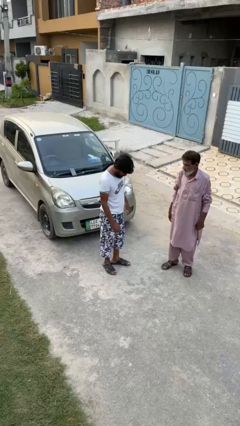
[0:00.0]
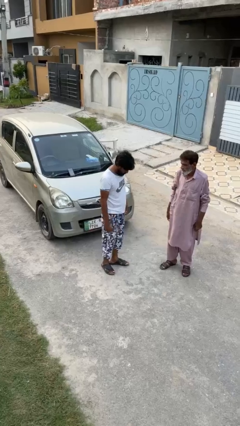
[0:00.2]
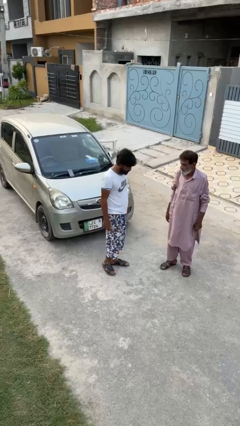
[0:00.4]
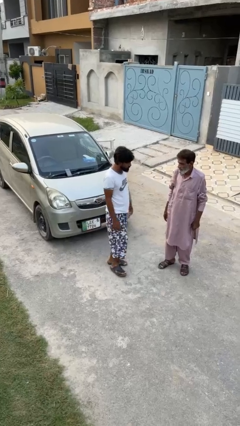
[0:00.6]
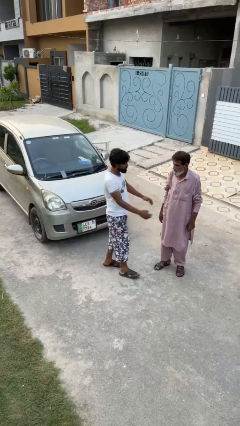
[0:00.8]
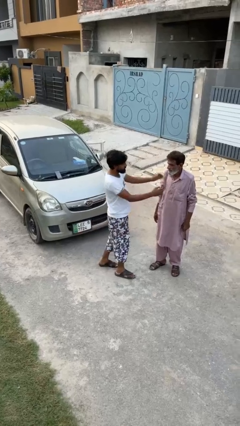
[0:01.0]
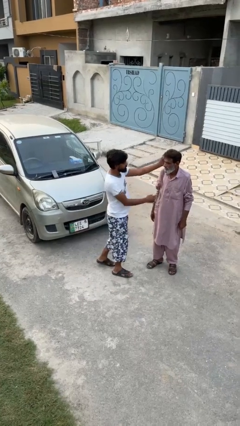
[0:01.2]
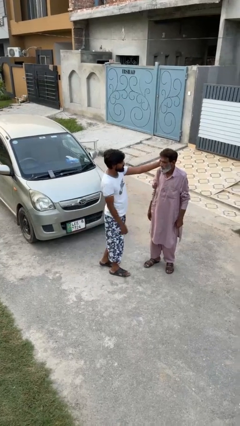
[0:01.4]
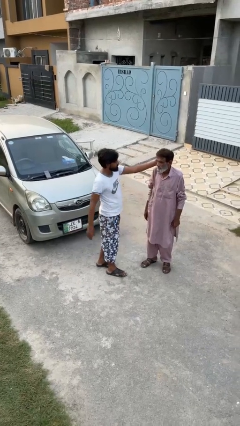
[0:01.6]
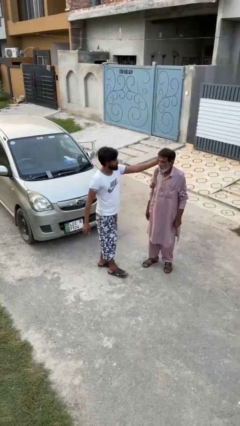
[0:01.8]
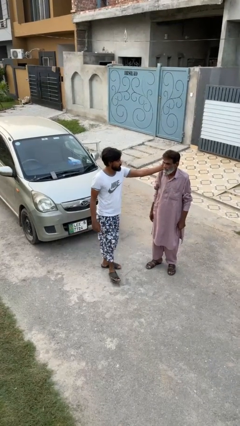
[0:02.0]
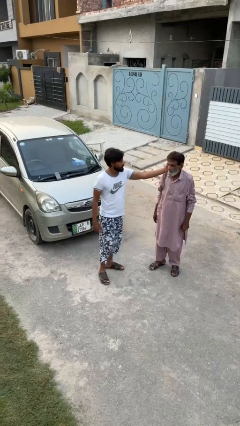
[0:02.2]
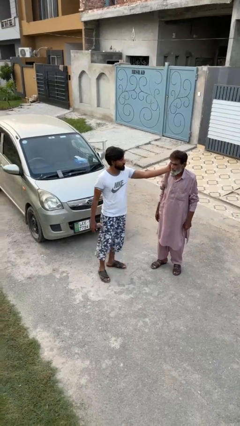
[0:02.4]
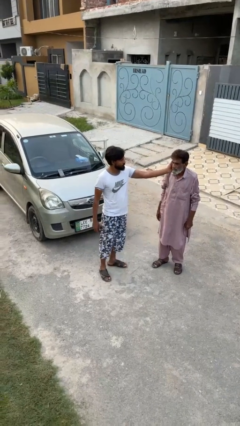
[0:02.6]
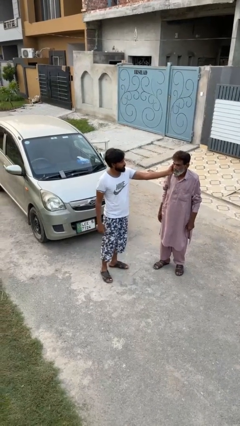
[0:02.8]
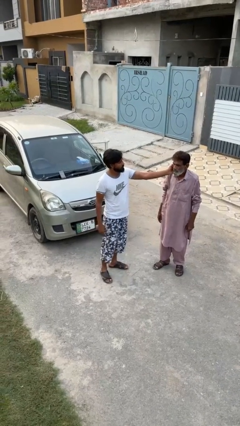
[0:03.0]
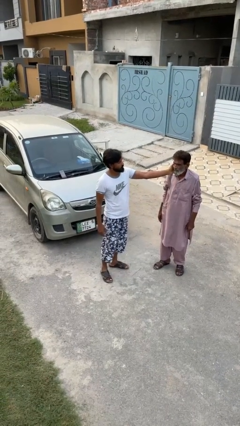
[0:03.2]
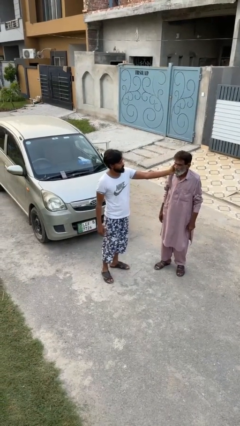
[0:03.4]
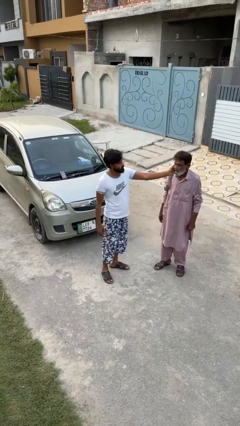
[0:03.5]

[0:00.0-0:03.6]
person touches face of person

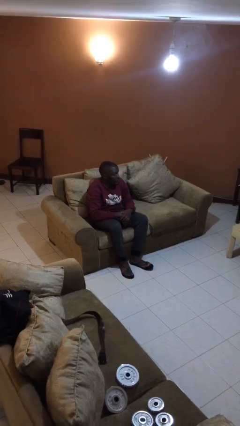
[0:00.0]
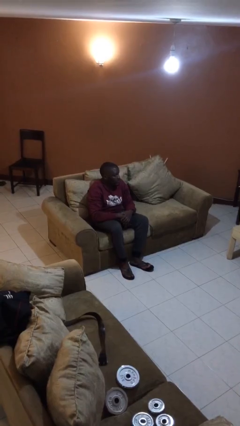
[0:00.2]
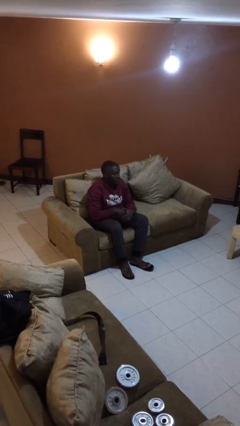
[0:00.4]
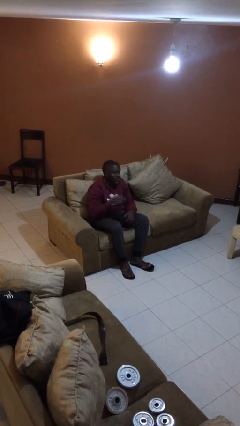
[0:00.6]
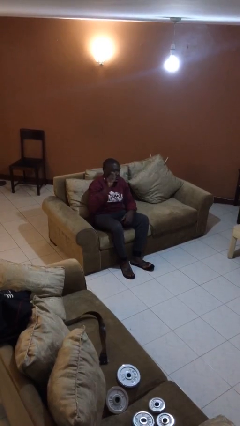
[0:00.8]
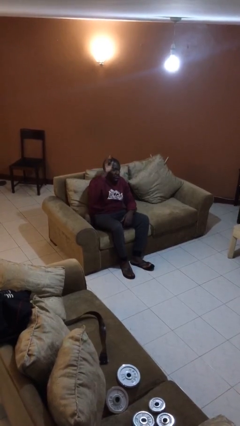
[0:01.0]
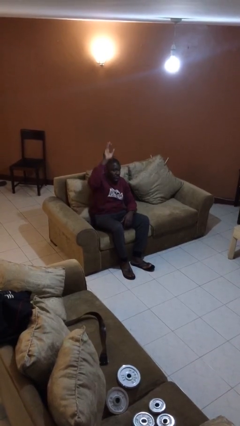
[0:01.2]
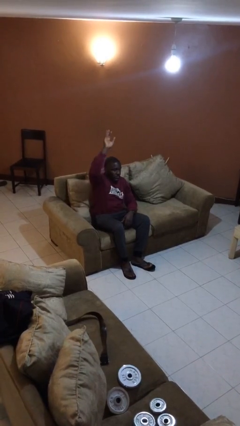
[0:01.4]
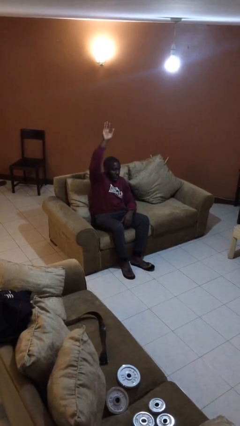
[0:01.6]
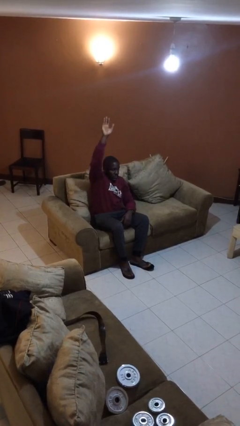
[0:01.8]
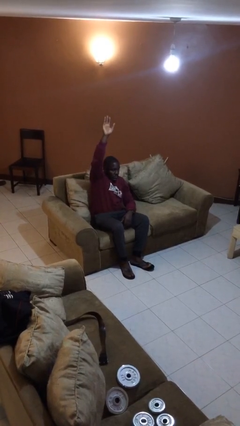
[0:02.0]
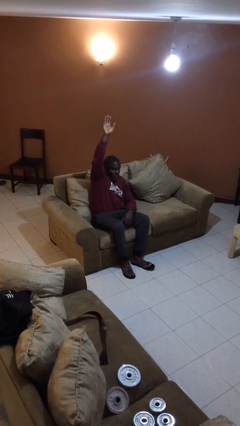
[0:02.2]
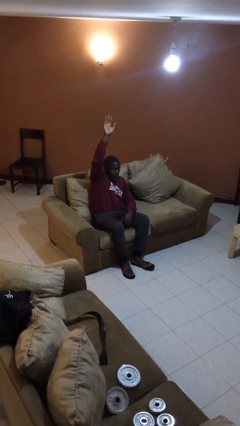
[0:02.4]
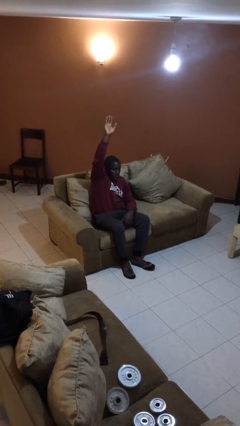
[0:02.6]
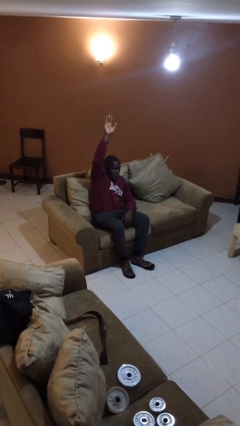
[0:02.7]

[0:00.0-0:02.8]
person gestures raise hand

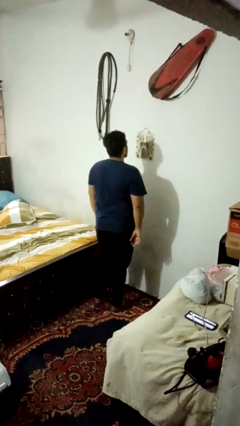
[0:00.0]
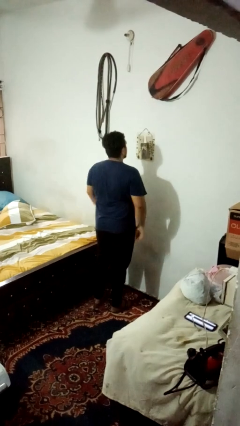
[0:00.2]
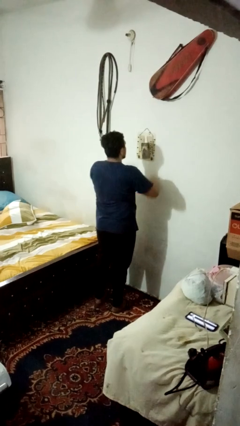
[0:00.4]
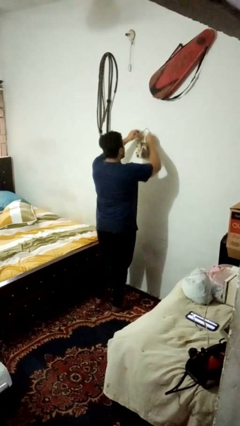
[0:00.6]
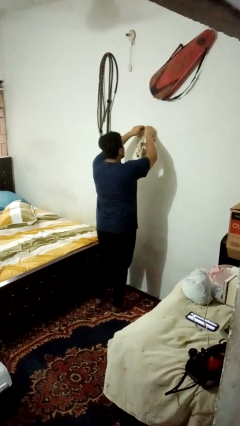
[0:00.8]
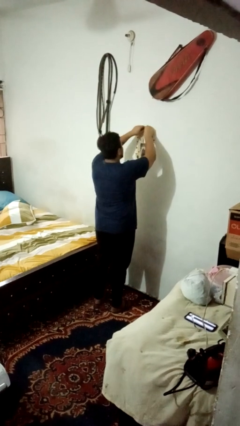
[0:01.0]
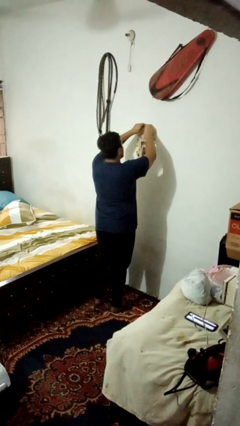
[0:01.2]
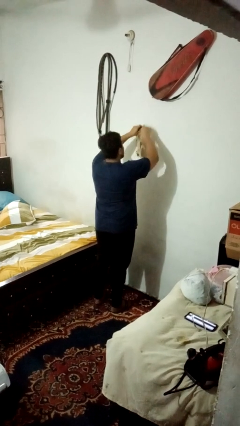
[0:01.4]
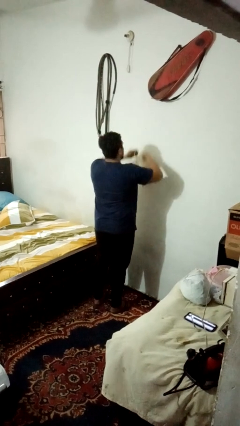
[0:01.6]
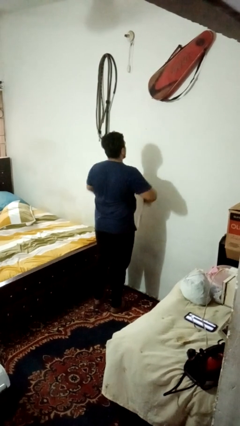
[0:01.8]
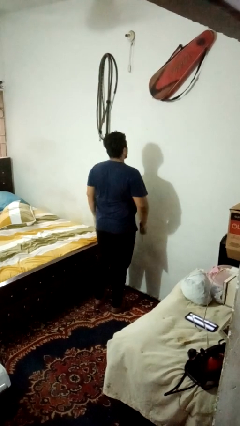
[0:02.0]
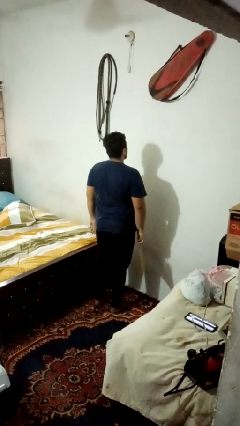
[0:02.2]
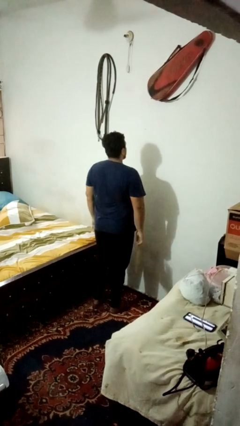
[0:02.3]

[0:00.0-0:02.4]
person takes down picture frame

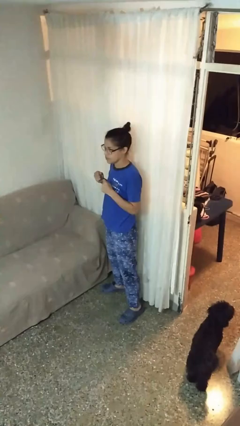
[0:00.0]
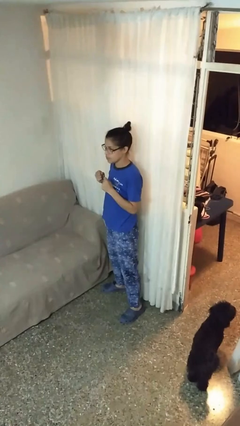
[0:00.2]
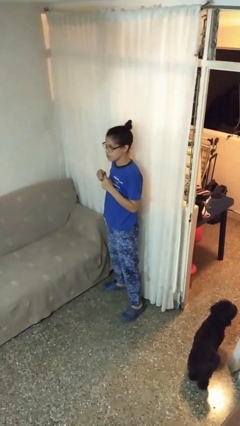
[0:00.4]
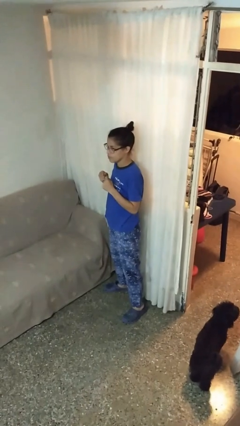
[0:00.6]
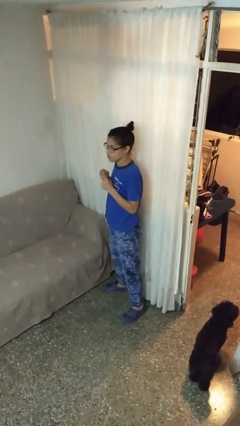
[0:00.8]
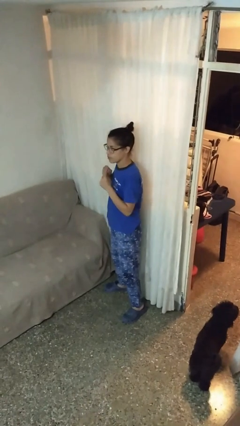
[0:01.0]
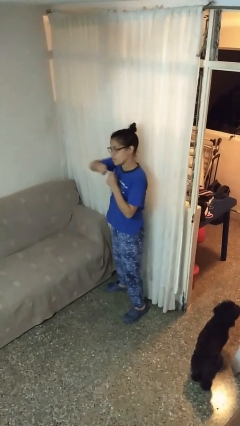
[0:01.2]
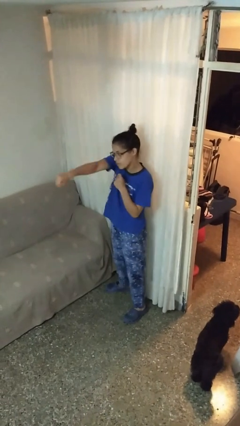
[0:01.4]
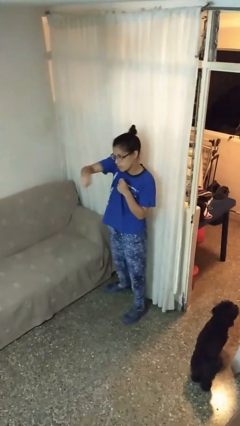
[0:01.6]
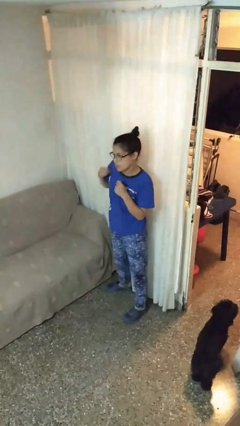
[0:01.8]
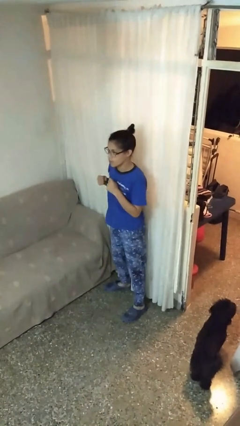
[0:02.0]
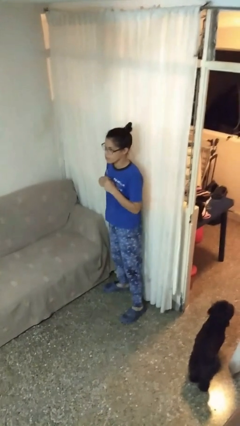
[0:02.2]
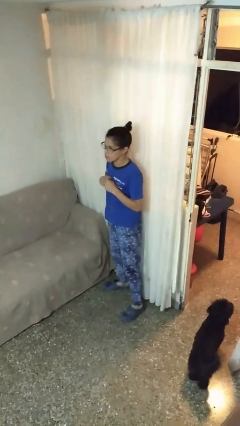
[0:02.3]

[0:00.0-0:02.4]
person punches

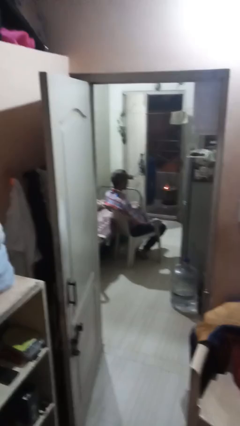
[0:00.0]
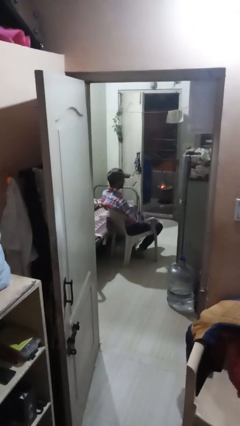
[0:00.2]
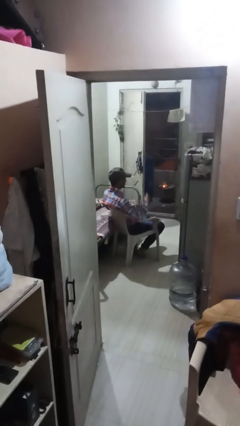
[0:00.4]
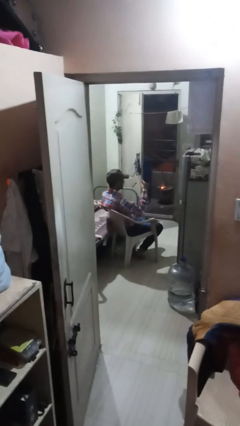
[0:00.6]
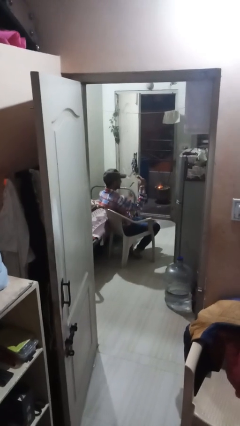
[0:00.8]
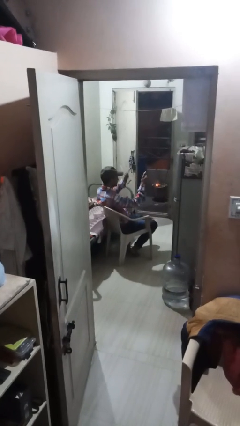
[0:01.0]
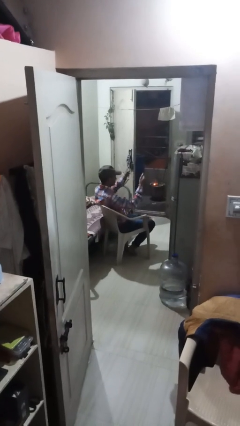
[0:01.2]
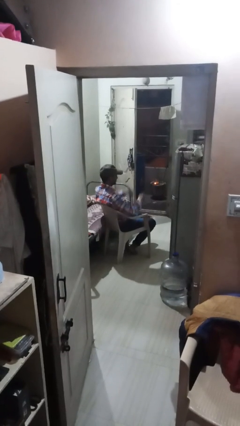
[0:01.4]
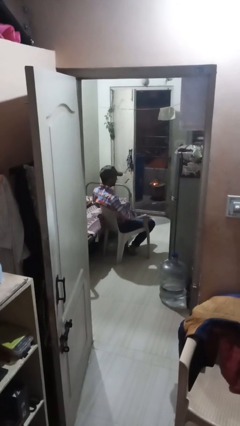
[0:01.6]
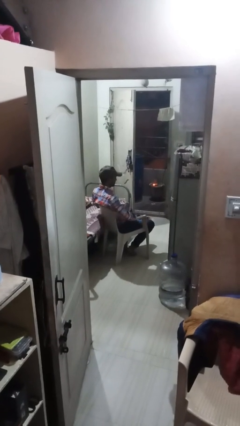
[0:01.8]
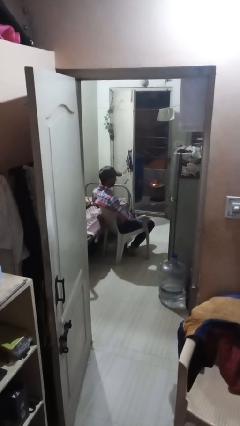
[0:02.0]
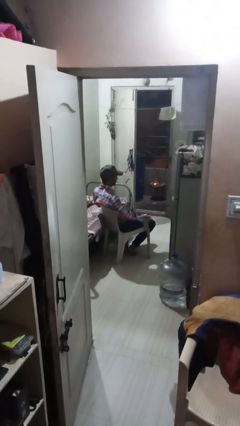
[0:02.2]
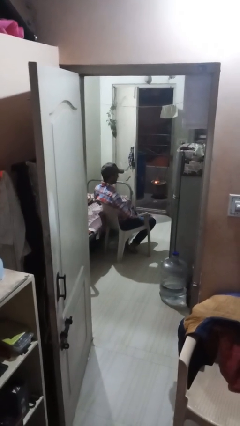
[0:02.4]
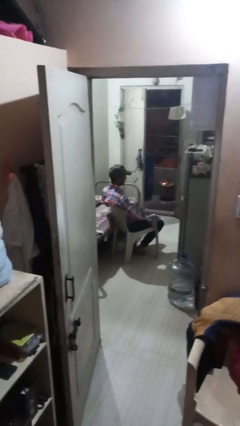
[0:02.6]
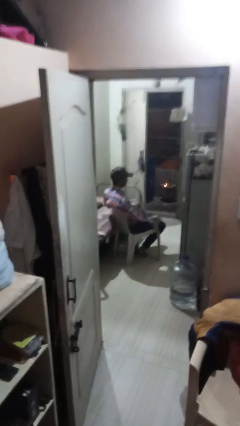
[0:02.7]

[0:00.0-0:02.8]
person snaps fingers

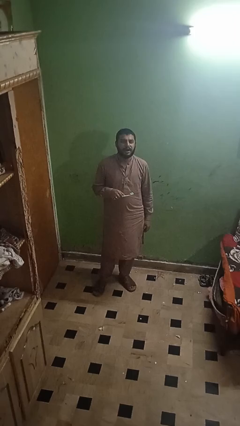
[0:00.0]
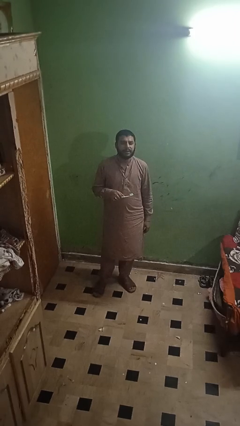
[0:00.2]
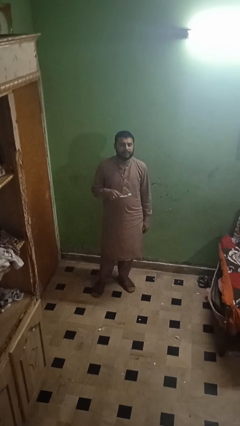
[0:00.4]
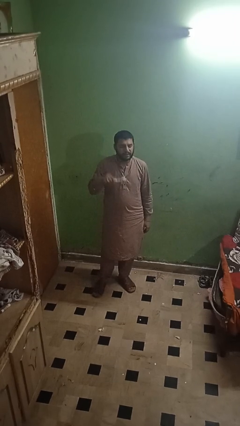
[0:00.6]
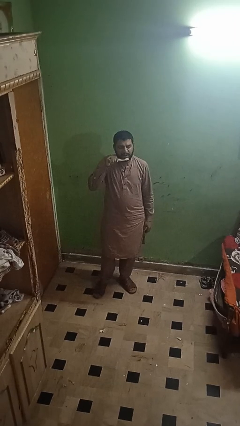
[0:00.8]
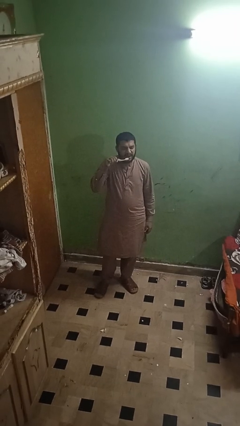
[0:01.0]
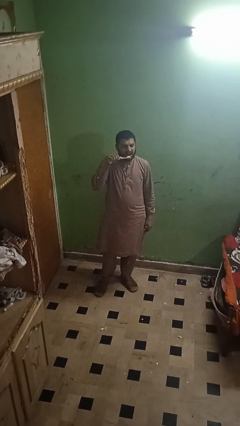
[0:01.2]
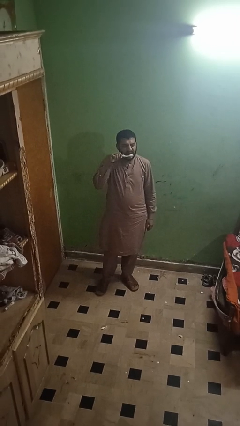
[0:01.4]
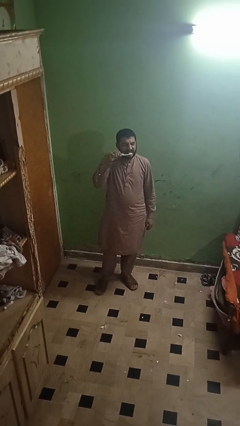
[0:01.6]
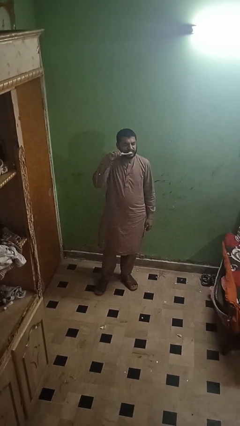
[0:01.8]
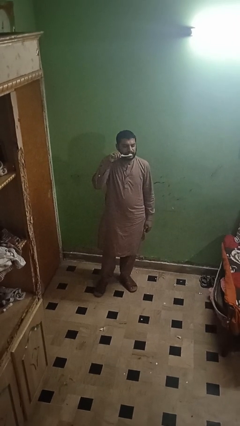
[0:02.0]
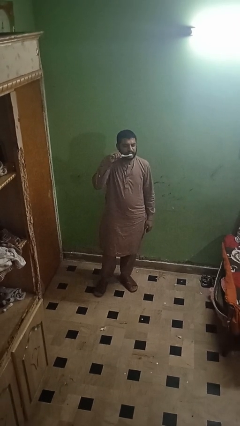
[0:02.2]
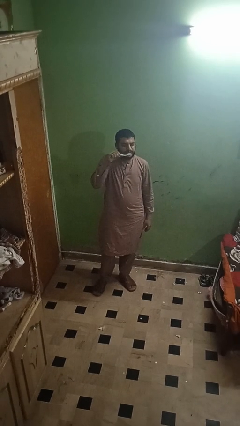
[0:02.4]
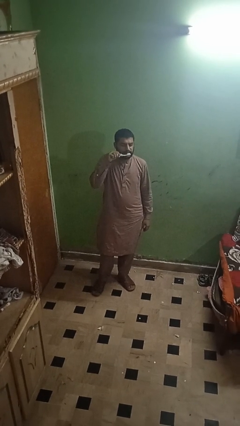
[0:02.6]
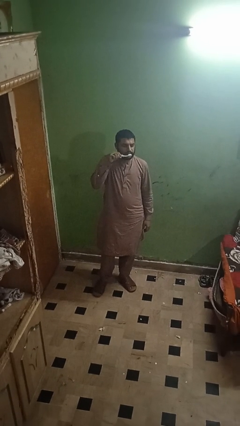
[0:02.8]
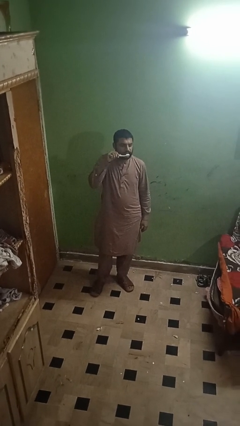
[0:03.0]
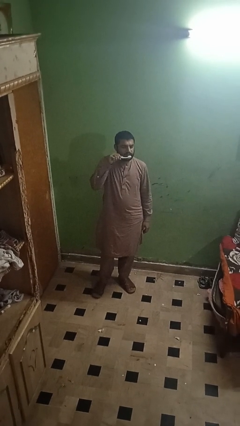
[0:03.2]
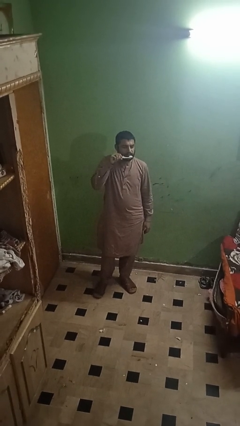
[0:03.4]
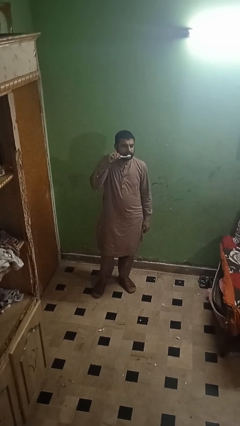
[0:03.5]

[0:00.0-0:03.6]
person brushes teeth

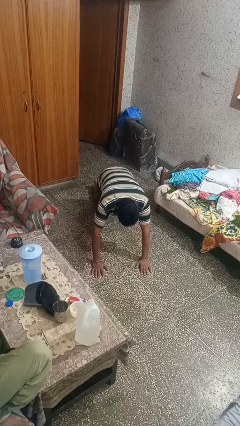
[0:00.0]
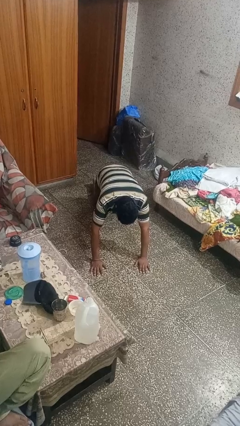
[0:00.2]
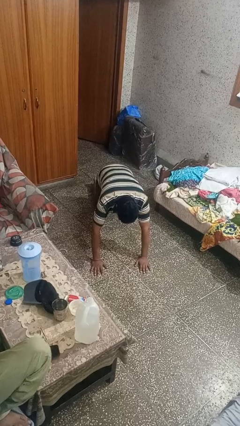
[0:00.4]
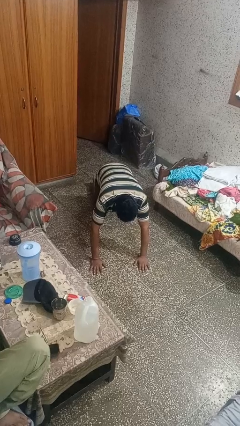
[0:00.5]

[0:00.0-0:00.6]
person exercises with pushup
